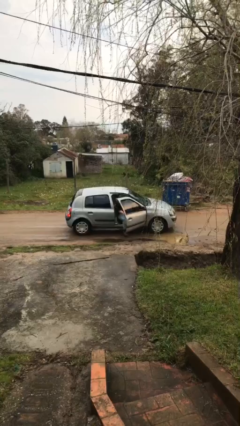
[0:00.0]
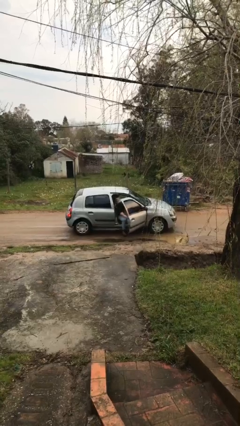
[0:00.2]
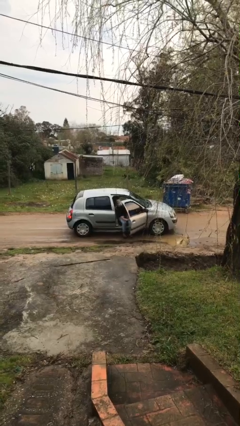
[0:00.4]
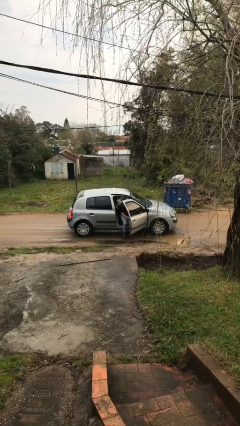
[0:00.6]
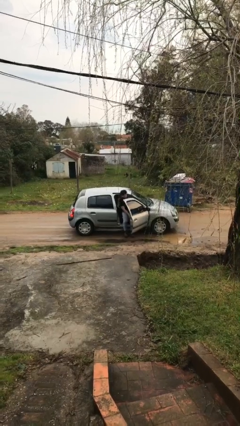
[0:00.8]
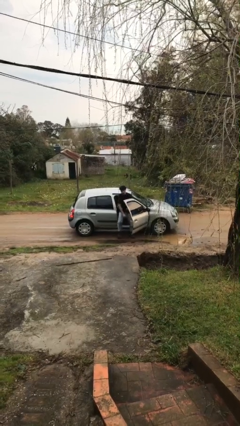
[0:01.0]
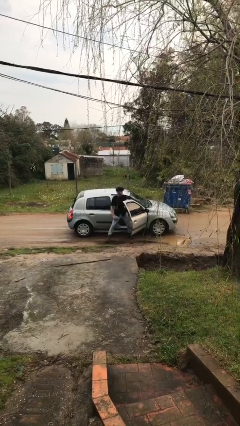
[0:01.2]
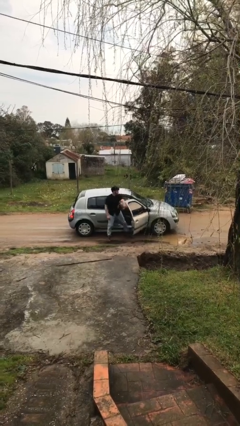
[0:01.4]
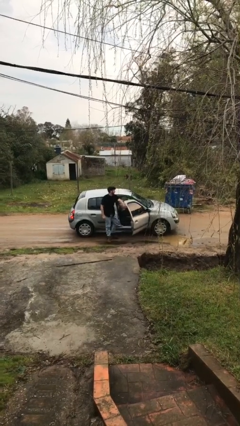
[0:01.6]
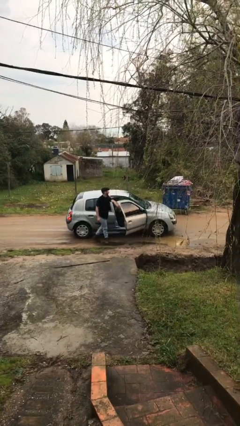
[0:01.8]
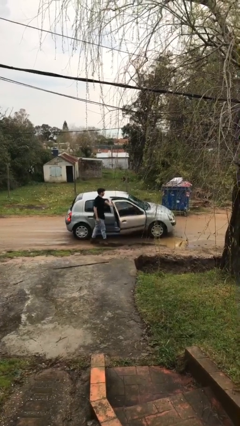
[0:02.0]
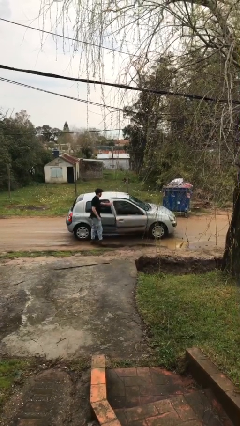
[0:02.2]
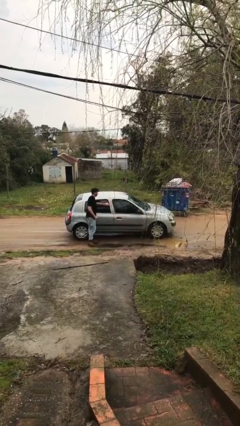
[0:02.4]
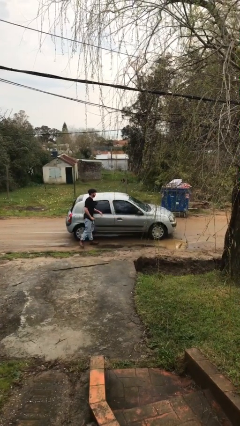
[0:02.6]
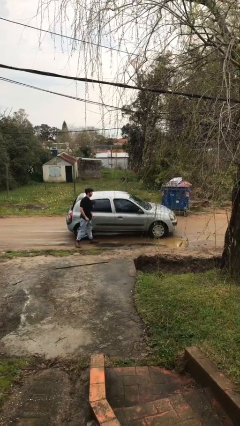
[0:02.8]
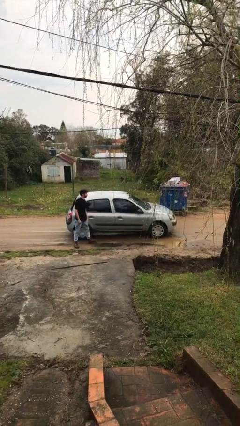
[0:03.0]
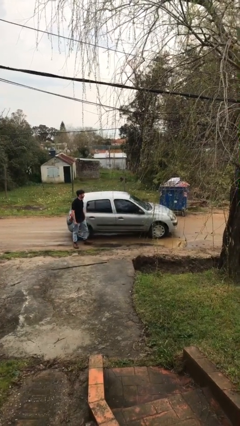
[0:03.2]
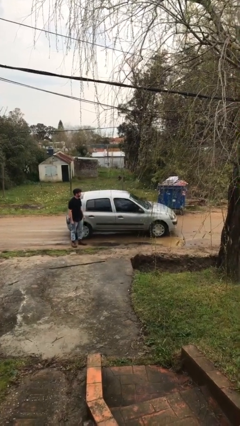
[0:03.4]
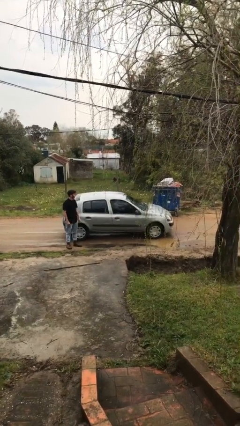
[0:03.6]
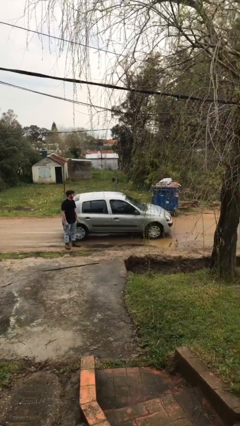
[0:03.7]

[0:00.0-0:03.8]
car drops off person

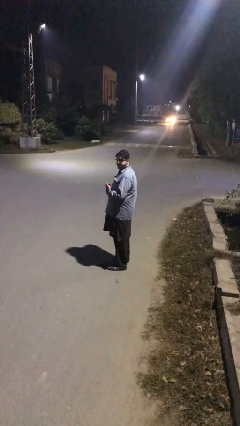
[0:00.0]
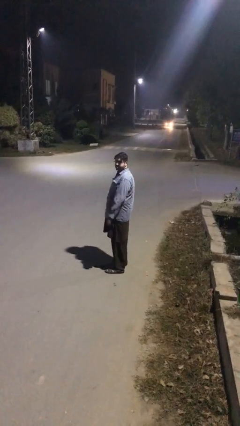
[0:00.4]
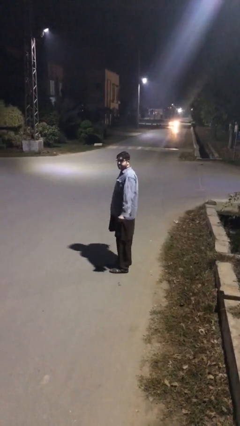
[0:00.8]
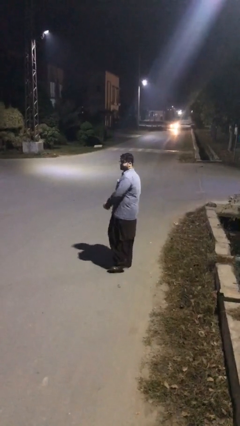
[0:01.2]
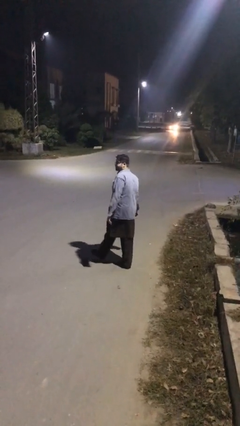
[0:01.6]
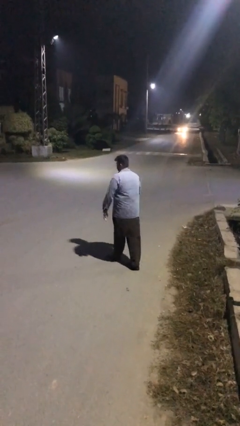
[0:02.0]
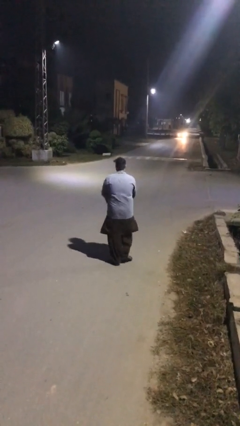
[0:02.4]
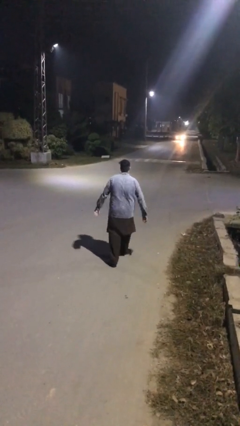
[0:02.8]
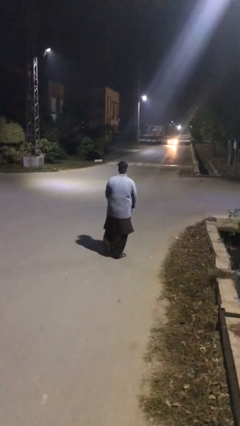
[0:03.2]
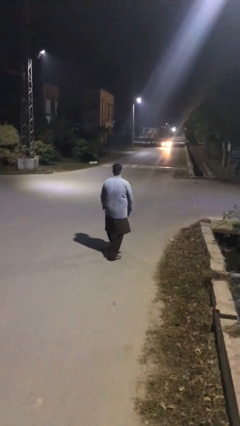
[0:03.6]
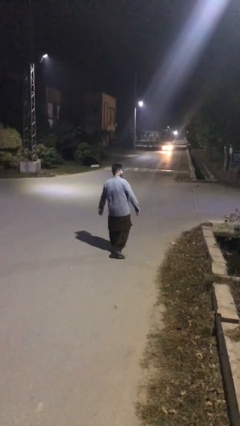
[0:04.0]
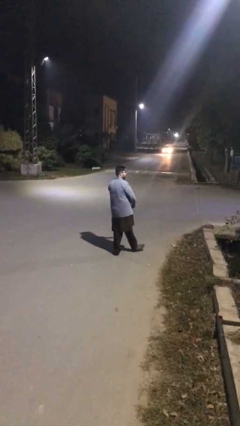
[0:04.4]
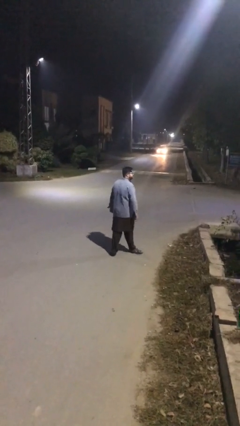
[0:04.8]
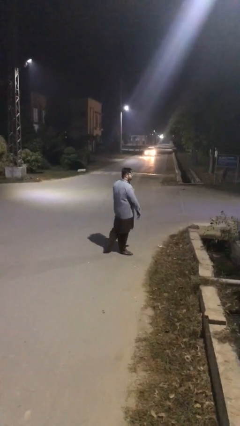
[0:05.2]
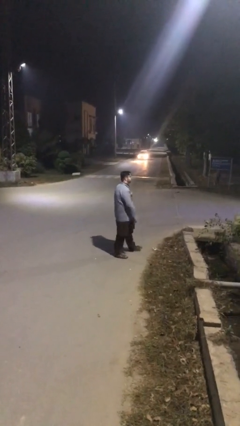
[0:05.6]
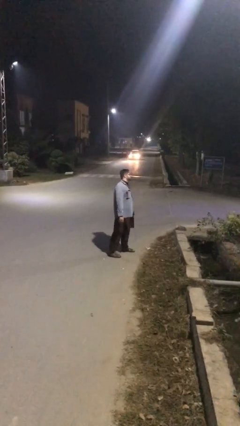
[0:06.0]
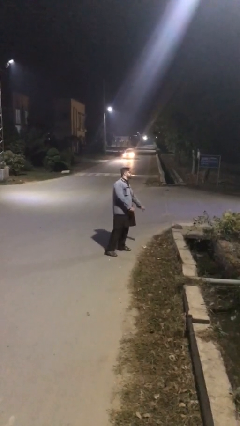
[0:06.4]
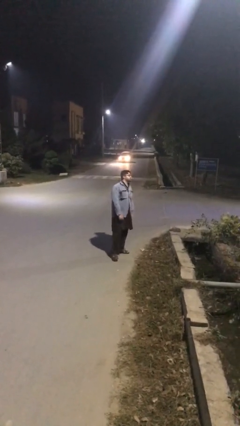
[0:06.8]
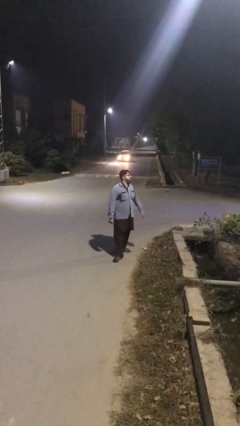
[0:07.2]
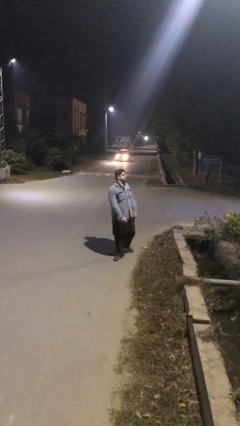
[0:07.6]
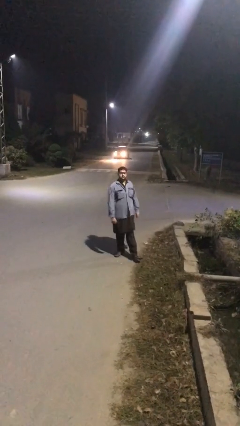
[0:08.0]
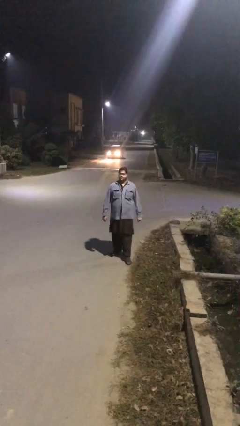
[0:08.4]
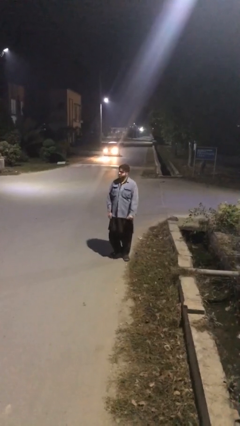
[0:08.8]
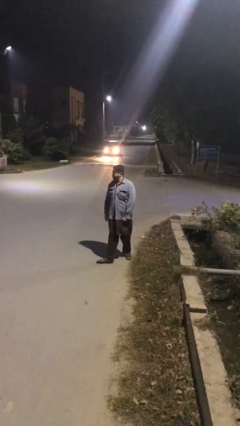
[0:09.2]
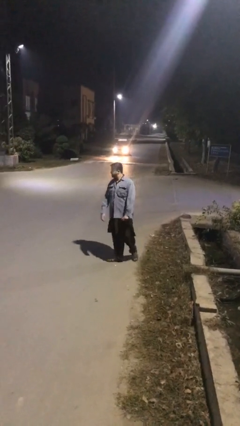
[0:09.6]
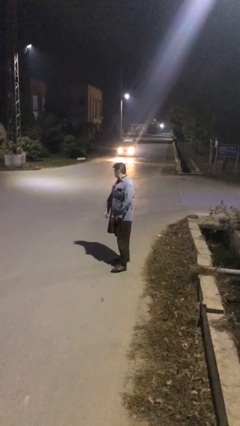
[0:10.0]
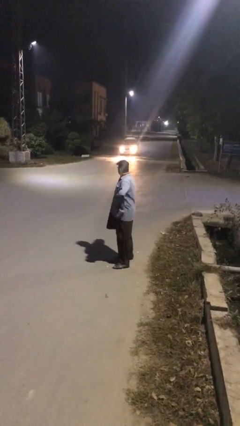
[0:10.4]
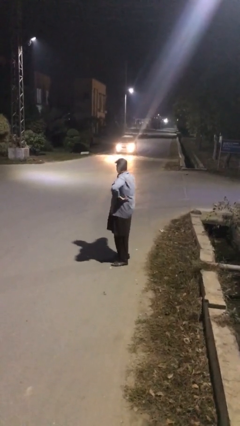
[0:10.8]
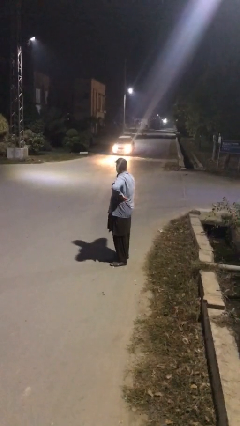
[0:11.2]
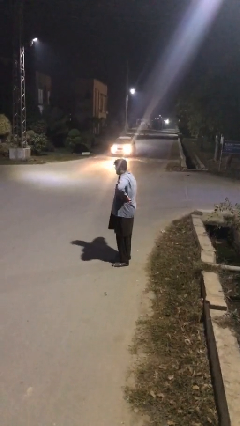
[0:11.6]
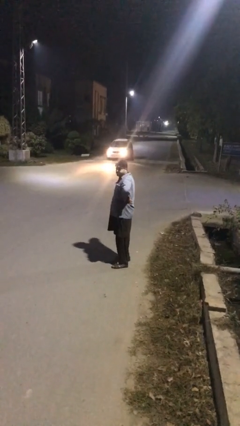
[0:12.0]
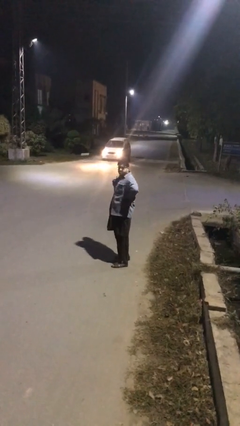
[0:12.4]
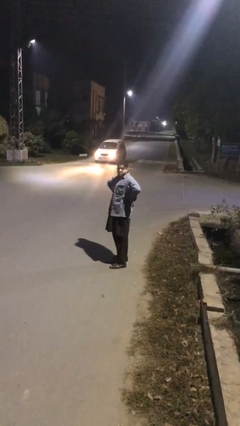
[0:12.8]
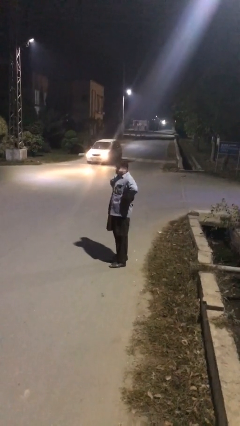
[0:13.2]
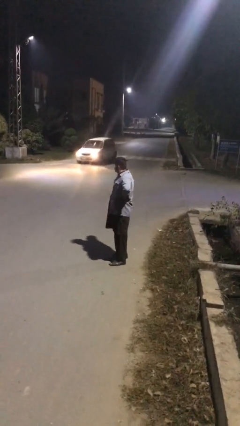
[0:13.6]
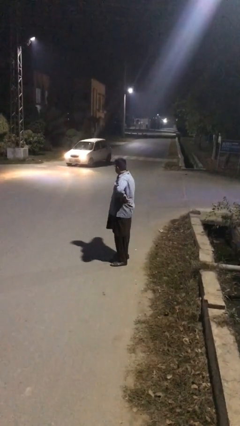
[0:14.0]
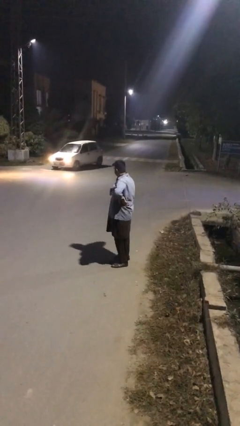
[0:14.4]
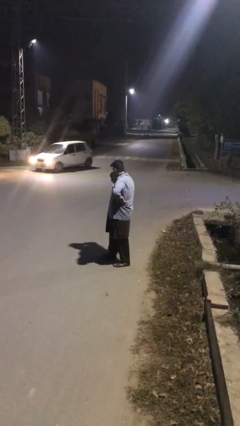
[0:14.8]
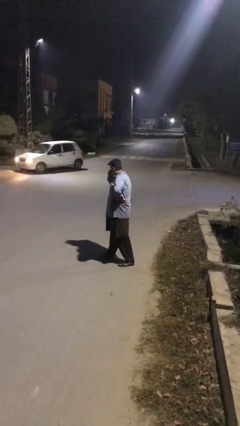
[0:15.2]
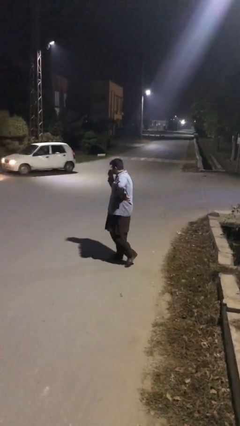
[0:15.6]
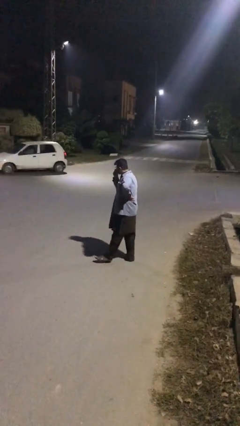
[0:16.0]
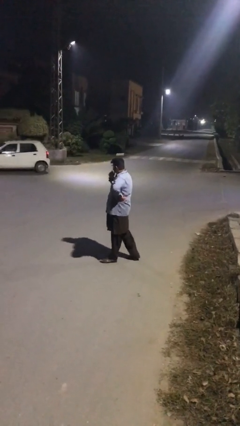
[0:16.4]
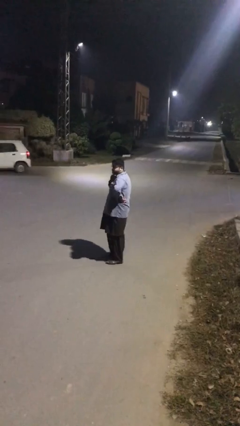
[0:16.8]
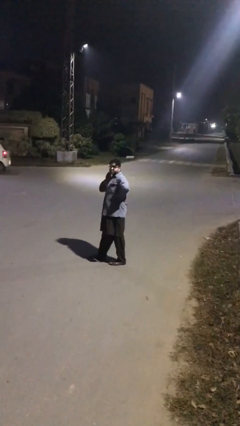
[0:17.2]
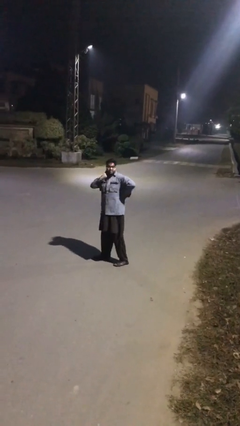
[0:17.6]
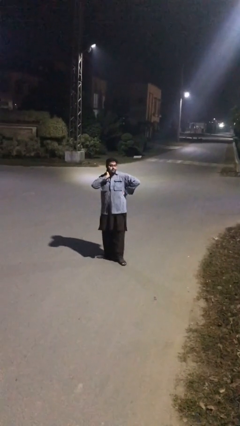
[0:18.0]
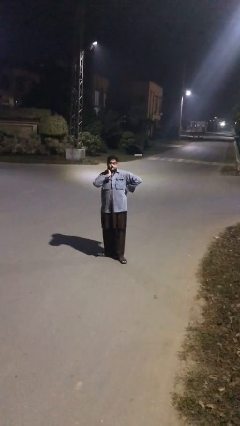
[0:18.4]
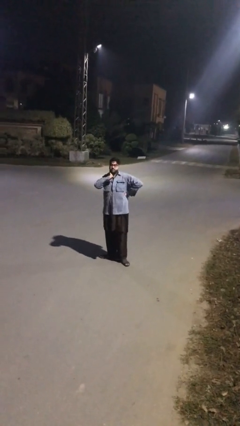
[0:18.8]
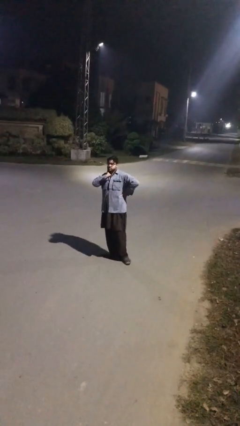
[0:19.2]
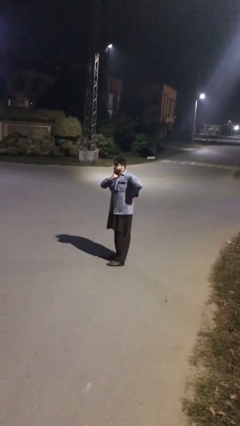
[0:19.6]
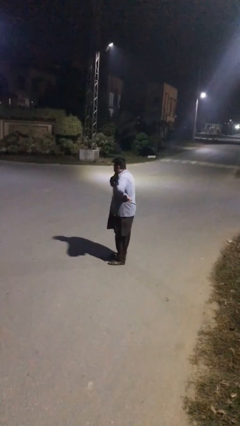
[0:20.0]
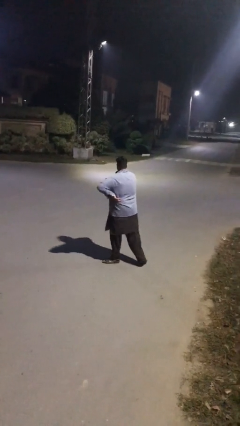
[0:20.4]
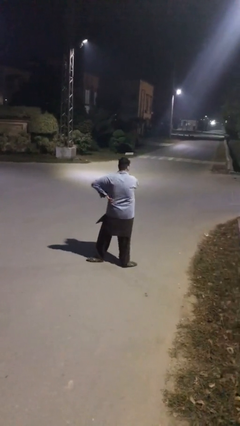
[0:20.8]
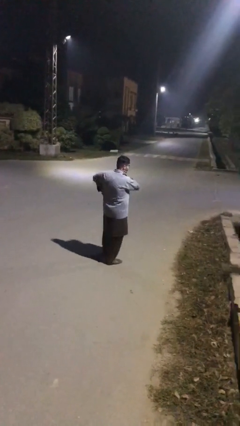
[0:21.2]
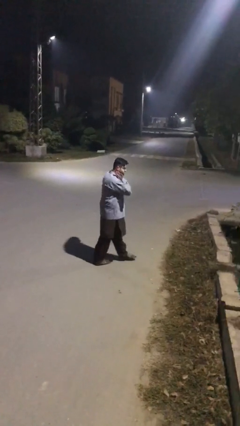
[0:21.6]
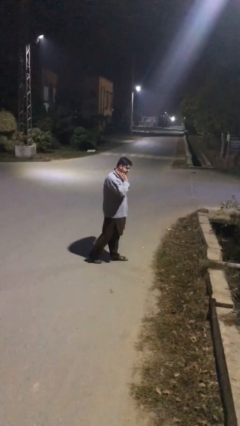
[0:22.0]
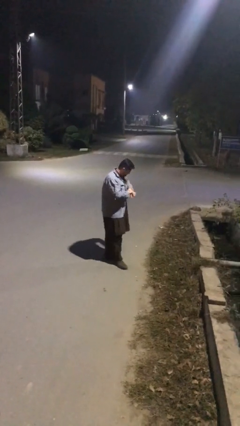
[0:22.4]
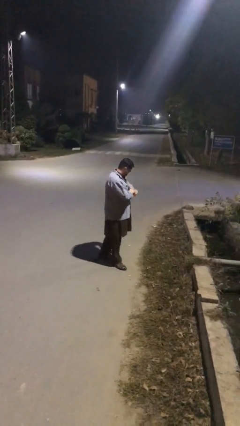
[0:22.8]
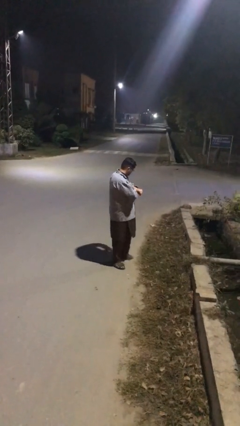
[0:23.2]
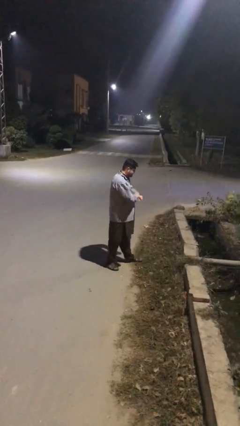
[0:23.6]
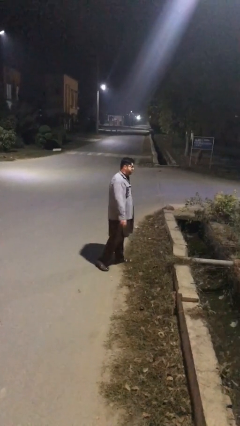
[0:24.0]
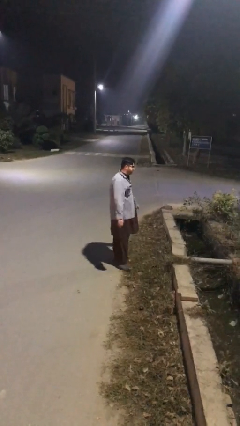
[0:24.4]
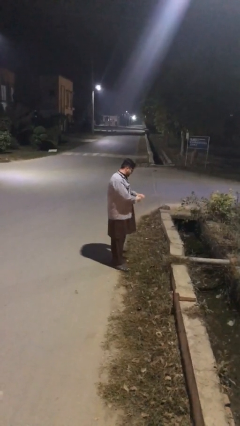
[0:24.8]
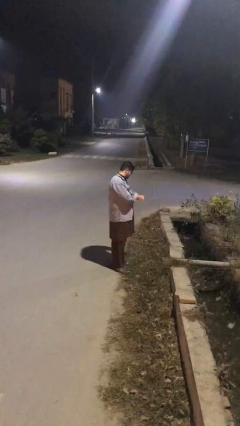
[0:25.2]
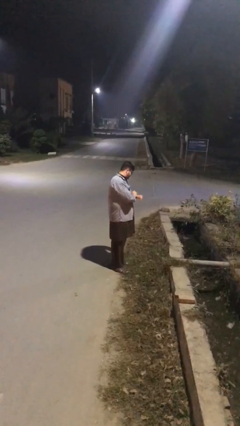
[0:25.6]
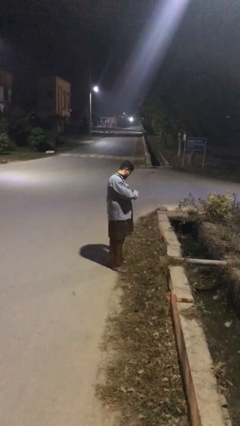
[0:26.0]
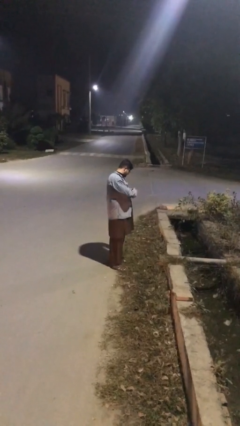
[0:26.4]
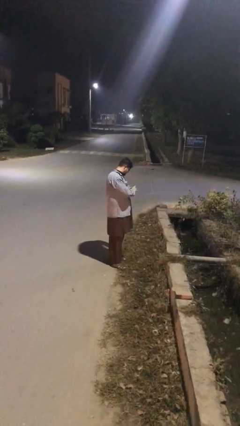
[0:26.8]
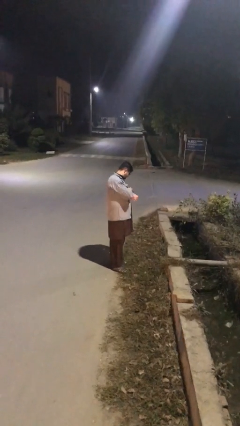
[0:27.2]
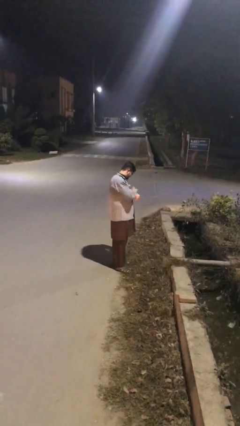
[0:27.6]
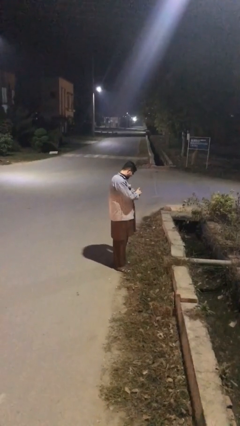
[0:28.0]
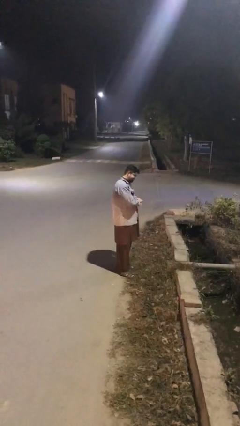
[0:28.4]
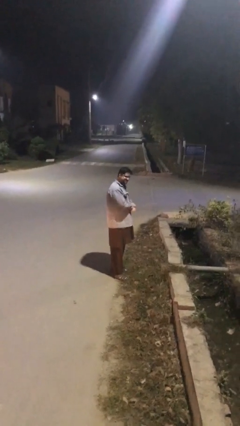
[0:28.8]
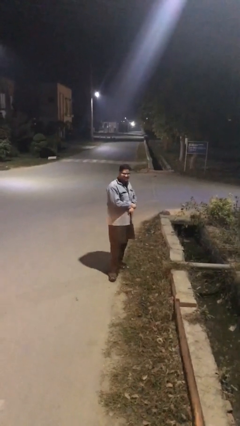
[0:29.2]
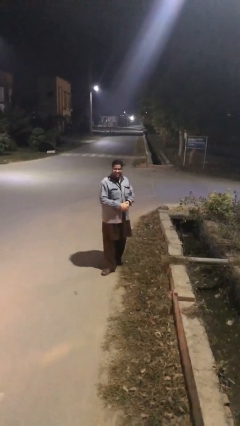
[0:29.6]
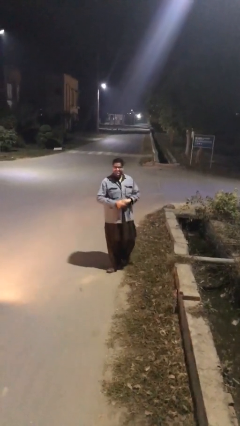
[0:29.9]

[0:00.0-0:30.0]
person walks
